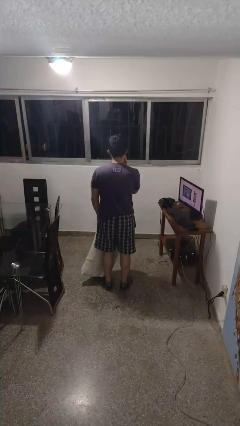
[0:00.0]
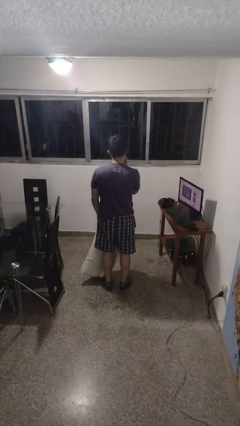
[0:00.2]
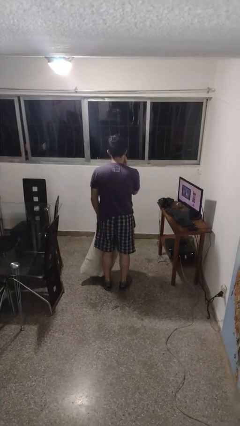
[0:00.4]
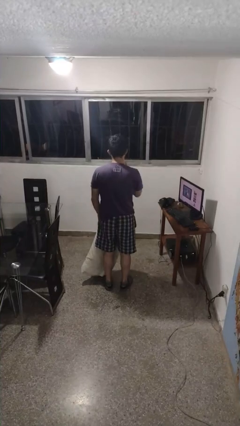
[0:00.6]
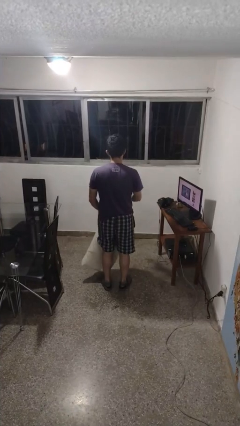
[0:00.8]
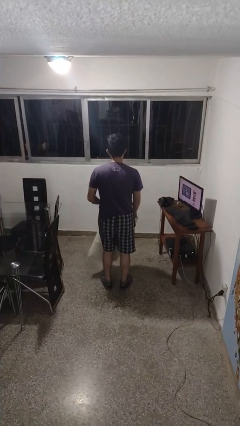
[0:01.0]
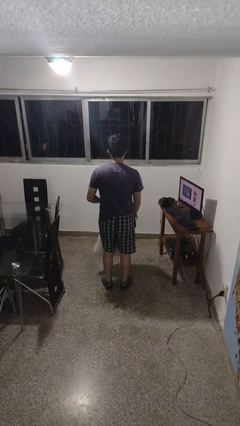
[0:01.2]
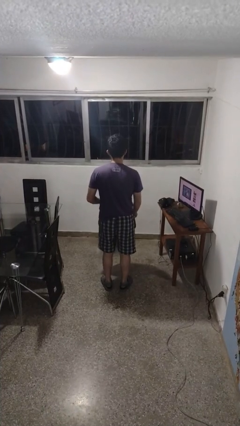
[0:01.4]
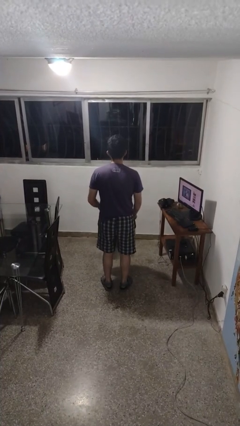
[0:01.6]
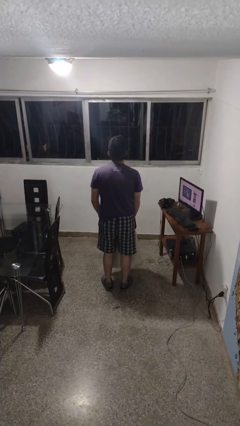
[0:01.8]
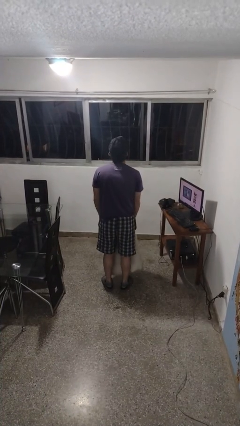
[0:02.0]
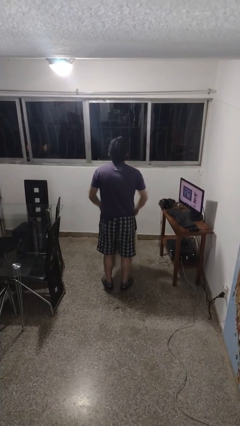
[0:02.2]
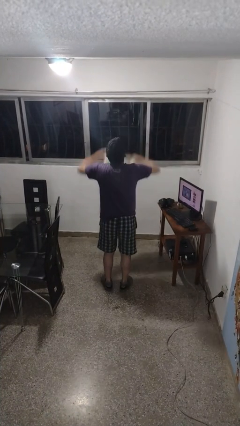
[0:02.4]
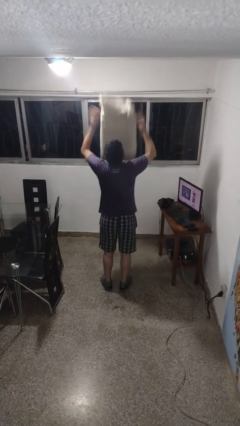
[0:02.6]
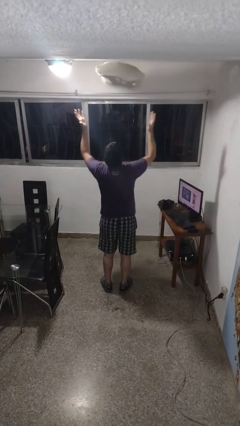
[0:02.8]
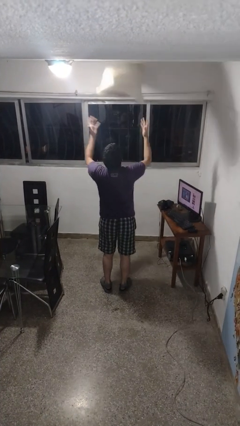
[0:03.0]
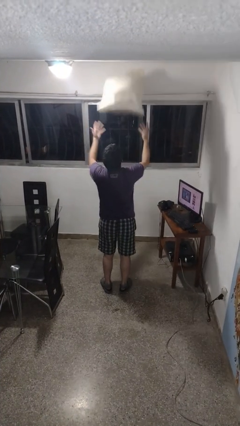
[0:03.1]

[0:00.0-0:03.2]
person drops object

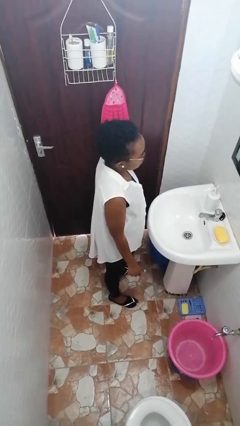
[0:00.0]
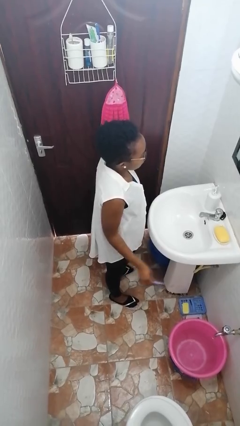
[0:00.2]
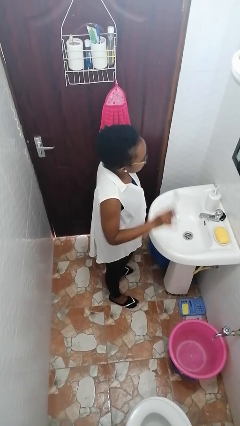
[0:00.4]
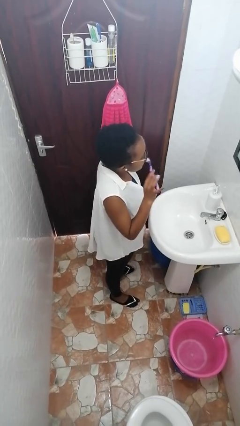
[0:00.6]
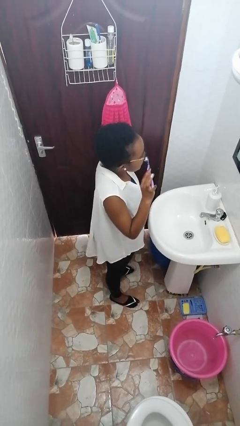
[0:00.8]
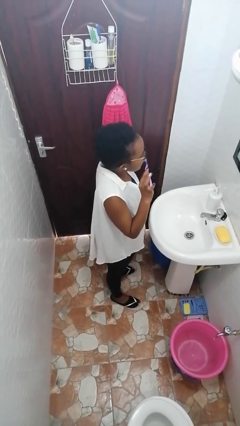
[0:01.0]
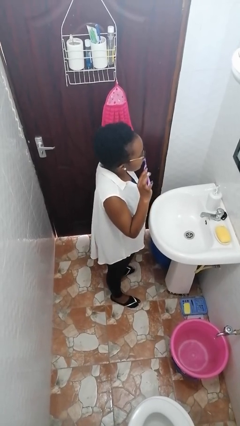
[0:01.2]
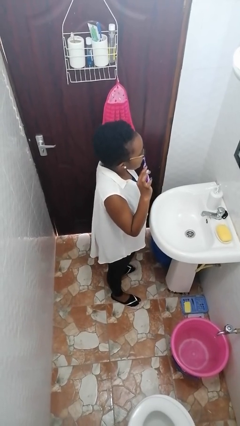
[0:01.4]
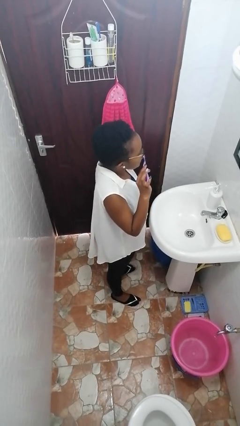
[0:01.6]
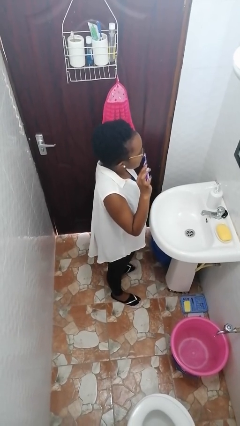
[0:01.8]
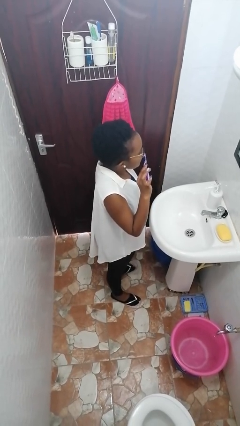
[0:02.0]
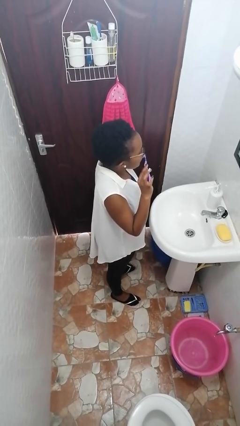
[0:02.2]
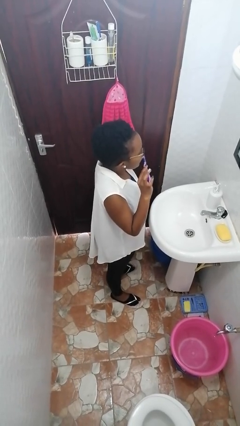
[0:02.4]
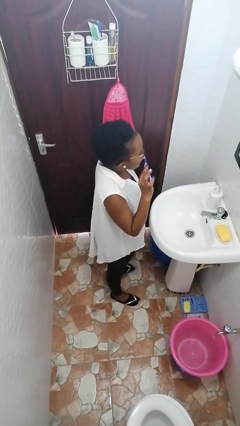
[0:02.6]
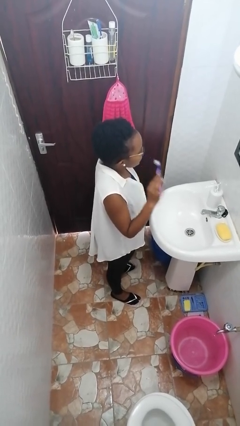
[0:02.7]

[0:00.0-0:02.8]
person brushes teeth

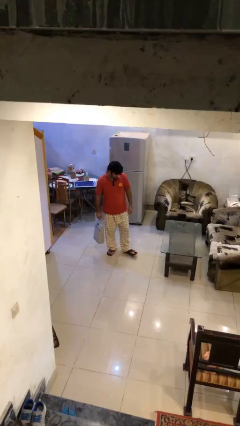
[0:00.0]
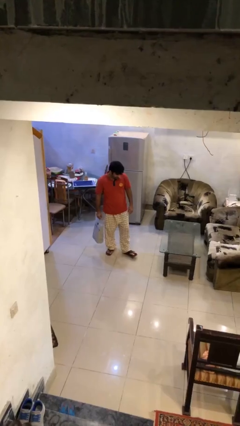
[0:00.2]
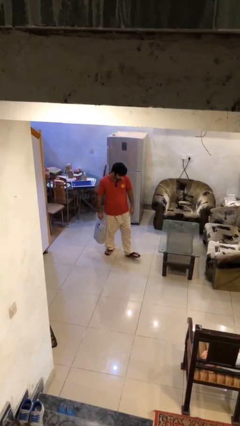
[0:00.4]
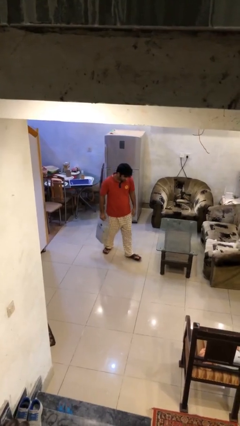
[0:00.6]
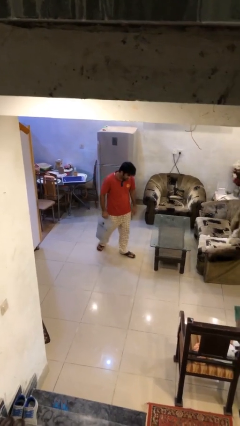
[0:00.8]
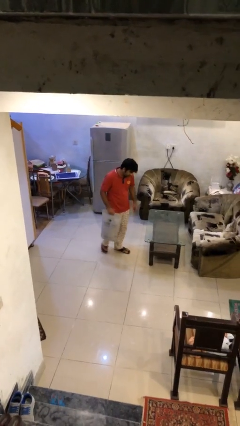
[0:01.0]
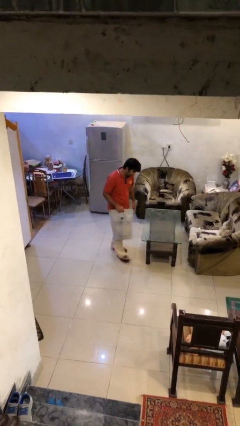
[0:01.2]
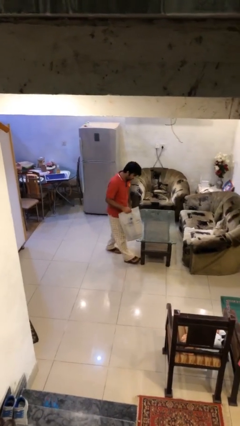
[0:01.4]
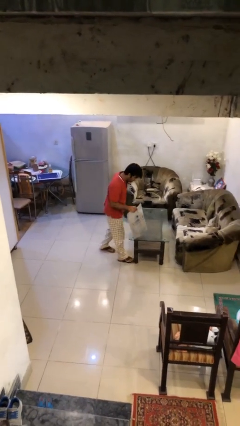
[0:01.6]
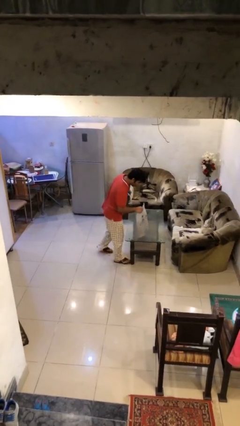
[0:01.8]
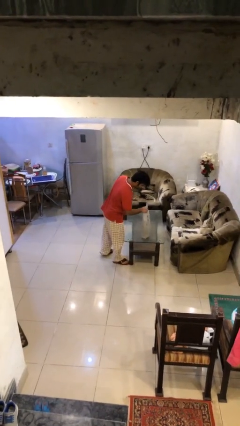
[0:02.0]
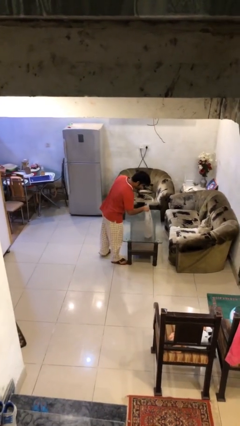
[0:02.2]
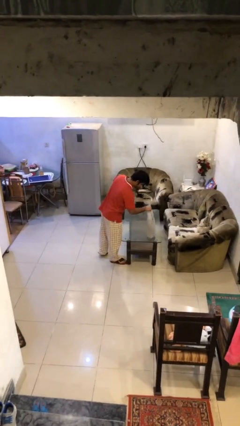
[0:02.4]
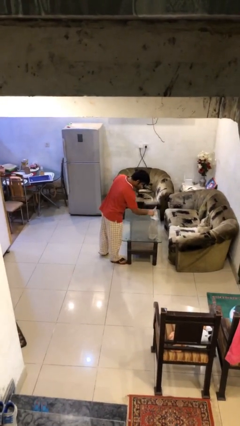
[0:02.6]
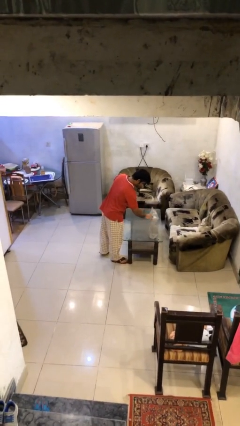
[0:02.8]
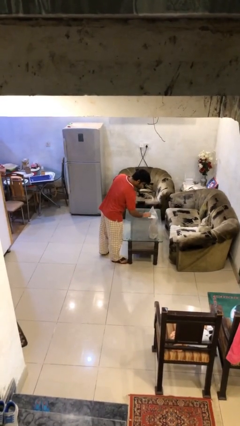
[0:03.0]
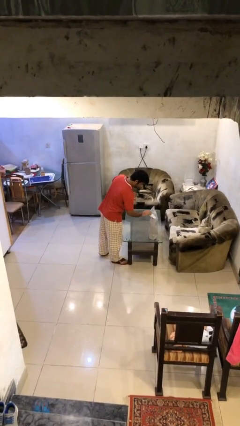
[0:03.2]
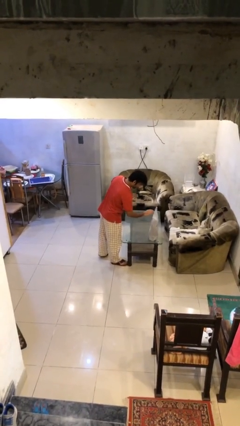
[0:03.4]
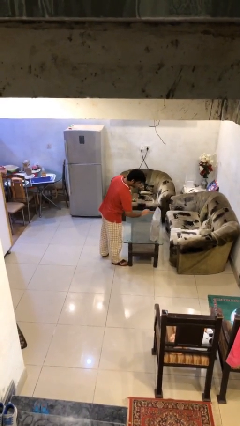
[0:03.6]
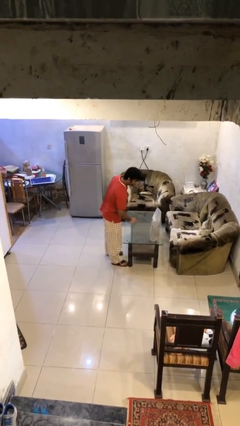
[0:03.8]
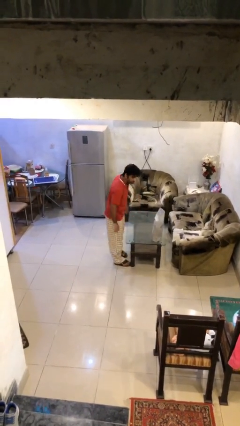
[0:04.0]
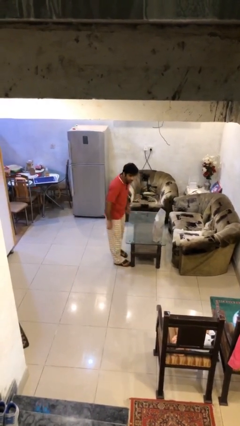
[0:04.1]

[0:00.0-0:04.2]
person puts down object on table

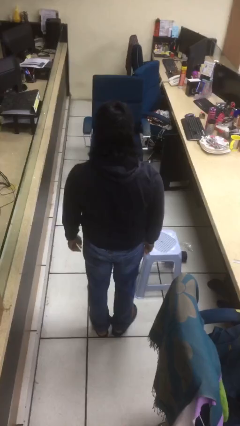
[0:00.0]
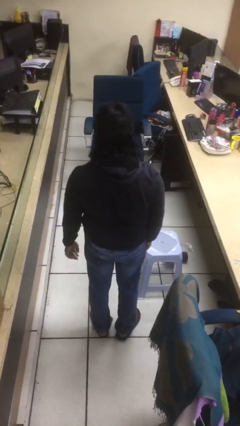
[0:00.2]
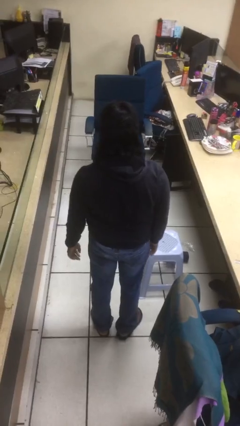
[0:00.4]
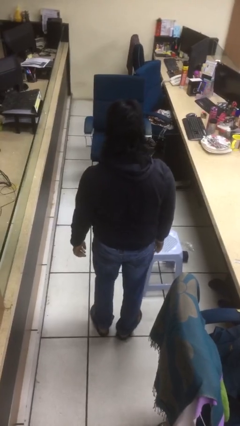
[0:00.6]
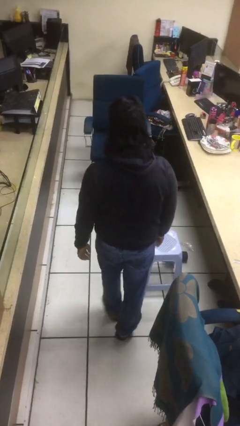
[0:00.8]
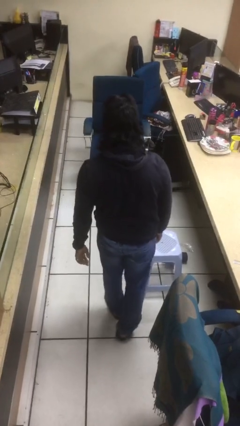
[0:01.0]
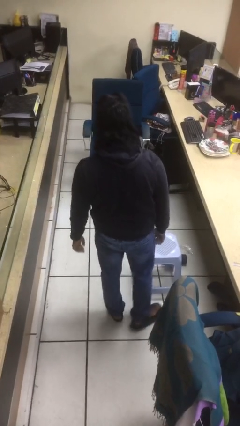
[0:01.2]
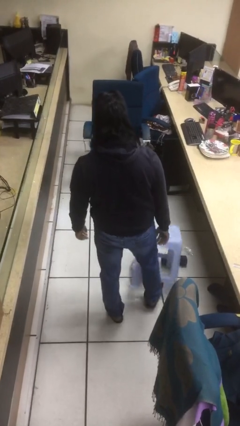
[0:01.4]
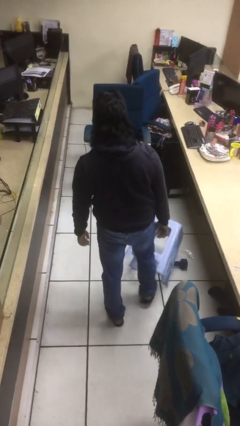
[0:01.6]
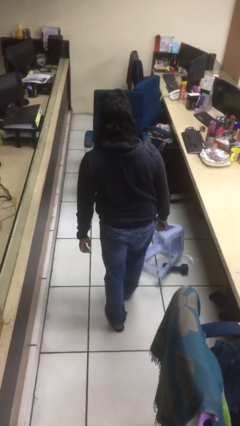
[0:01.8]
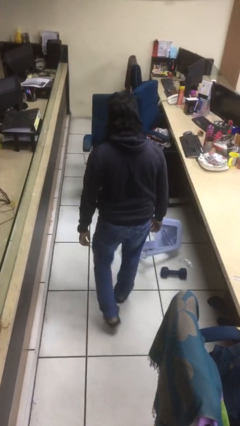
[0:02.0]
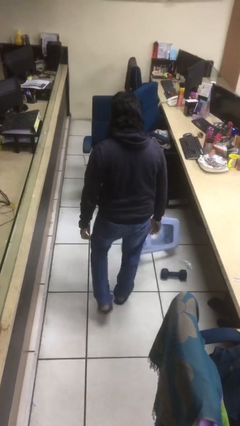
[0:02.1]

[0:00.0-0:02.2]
person knocks over furniture

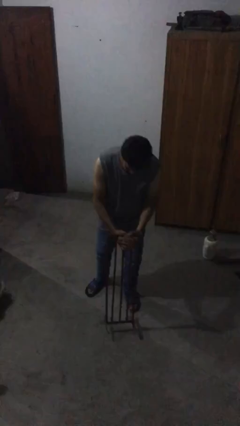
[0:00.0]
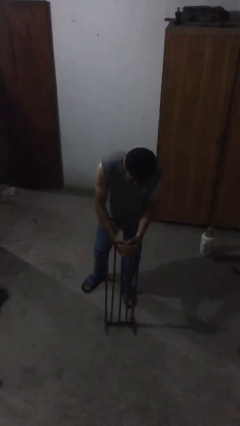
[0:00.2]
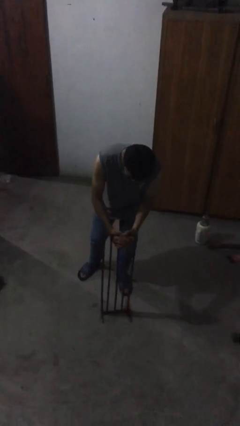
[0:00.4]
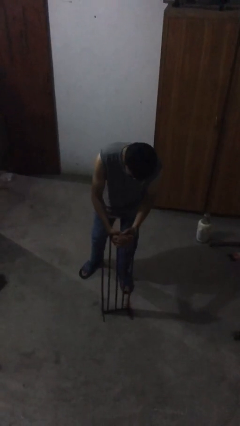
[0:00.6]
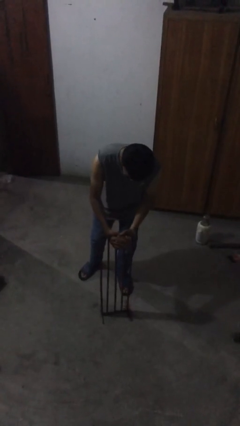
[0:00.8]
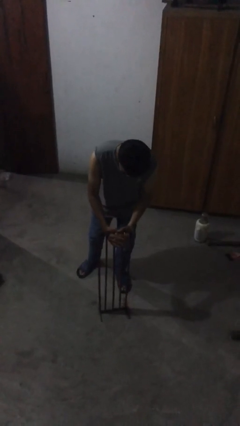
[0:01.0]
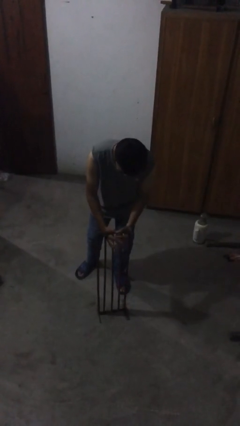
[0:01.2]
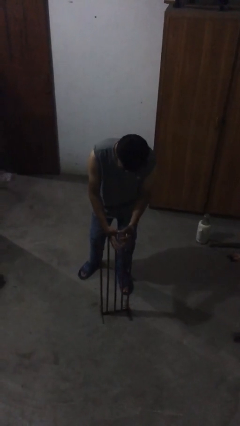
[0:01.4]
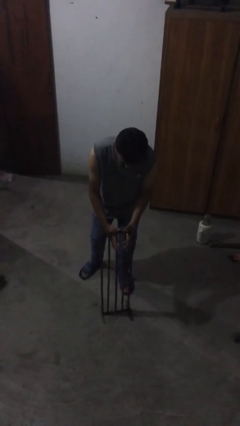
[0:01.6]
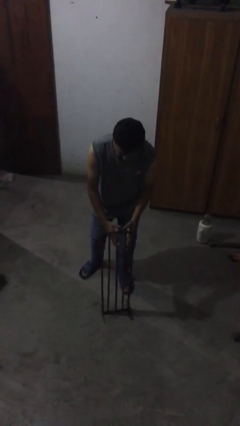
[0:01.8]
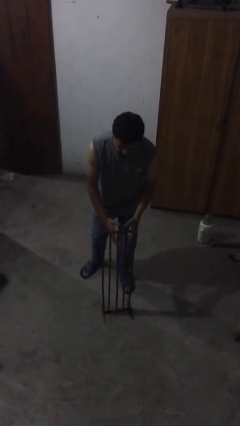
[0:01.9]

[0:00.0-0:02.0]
person puts down object on floor

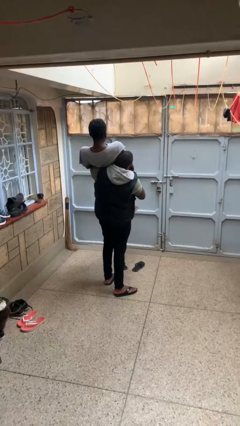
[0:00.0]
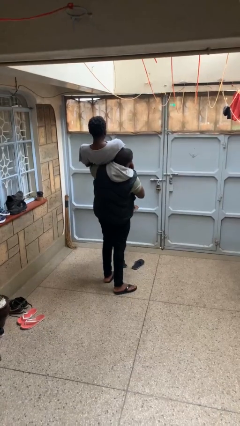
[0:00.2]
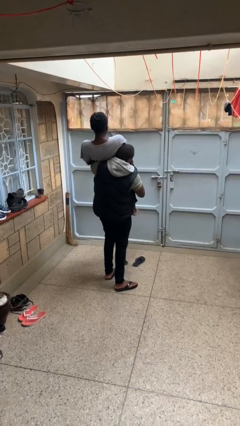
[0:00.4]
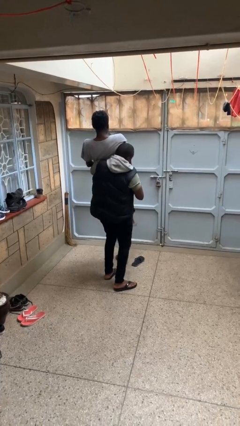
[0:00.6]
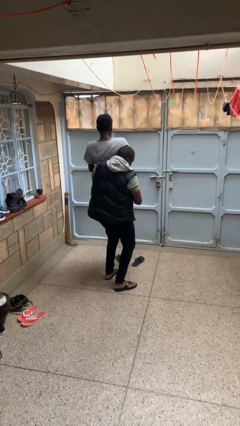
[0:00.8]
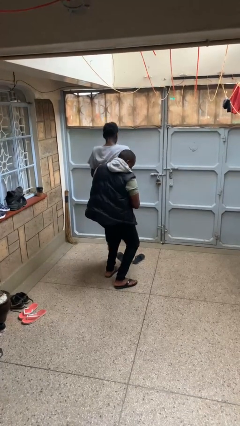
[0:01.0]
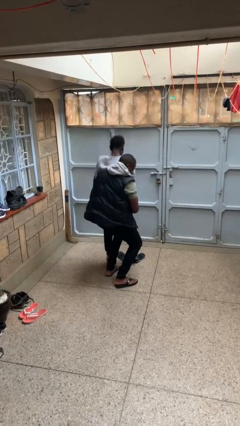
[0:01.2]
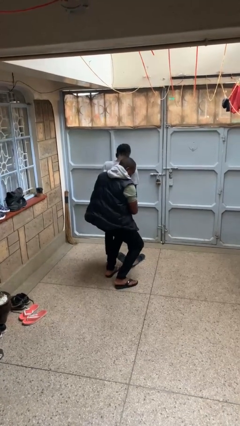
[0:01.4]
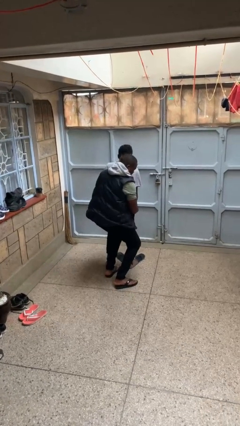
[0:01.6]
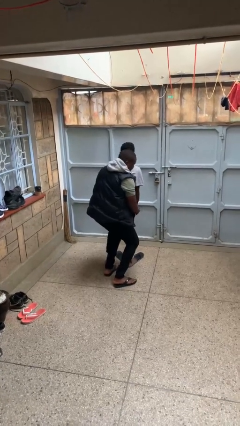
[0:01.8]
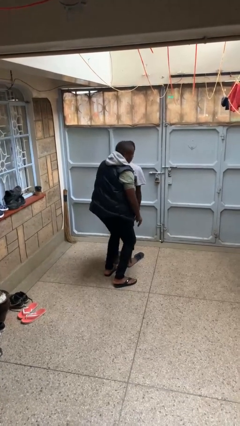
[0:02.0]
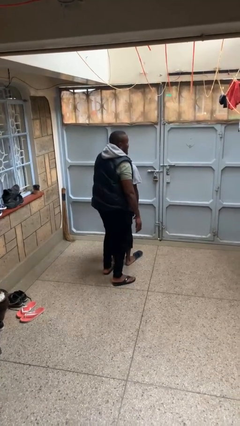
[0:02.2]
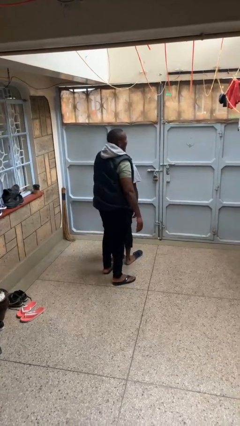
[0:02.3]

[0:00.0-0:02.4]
person puts down person

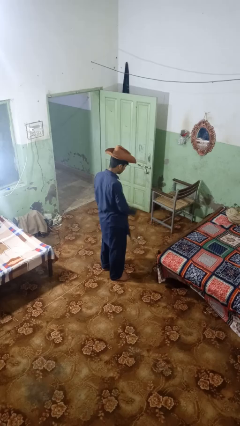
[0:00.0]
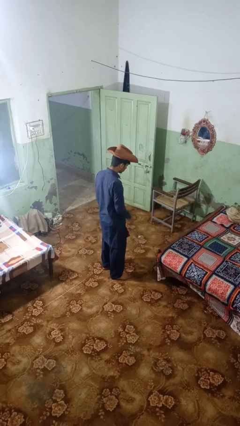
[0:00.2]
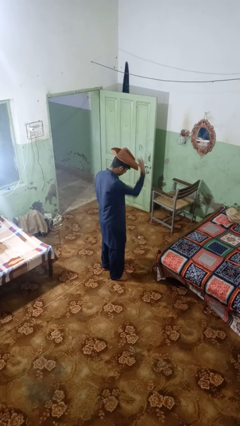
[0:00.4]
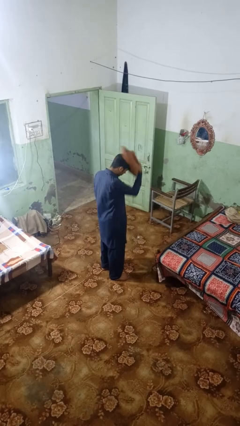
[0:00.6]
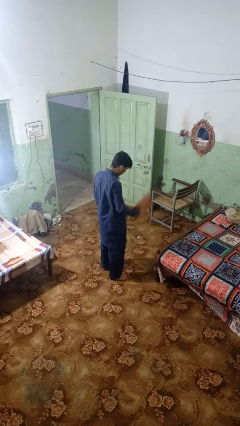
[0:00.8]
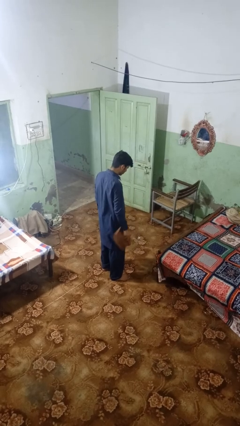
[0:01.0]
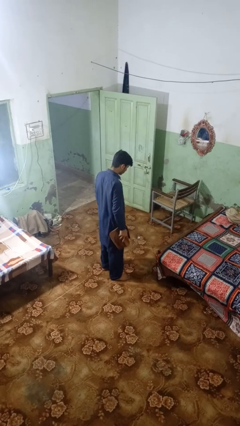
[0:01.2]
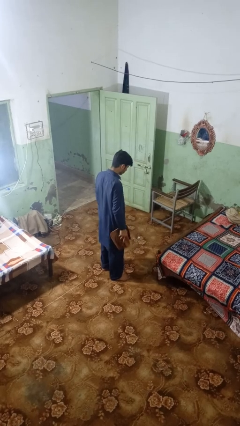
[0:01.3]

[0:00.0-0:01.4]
person takes off hat
